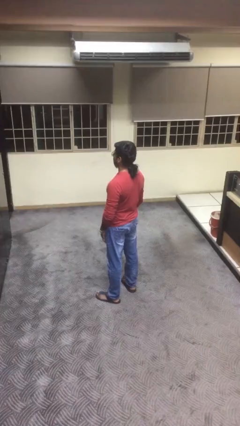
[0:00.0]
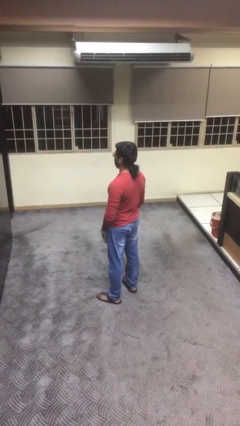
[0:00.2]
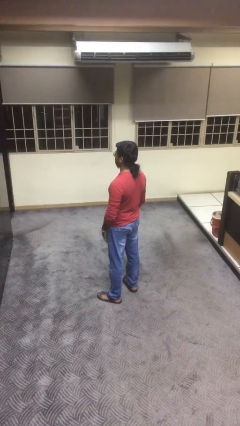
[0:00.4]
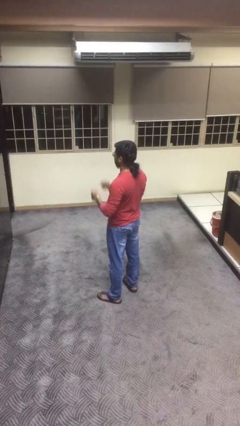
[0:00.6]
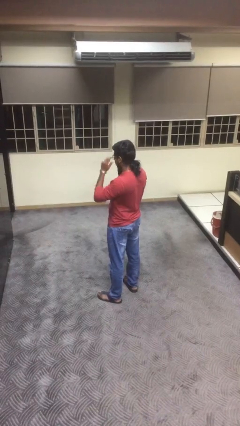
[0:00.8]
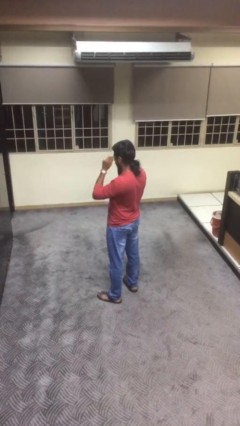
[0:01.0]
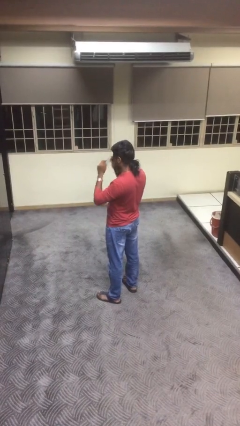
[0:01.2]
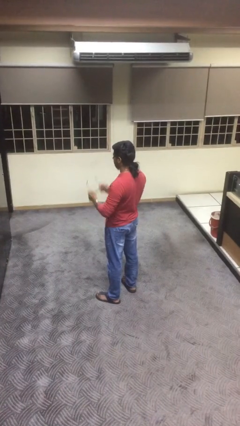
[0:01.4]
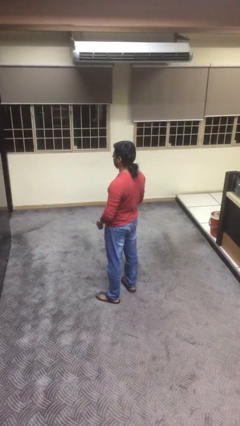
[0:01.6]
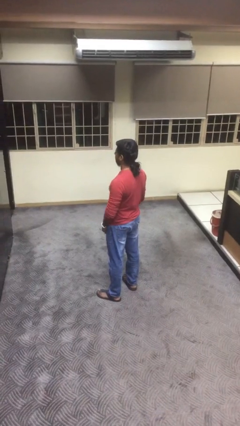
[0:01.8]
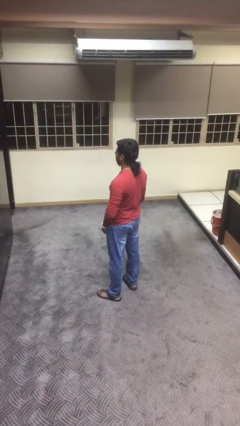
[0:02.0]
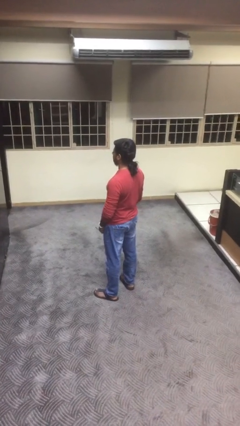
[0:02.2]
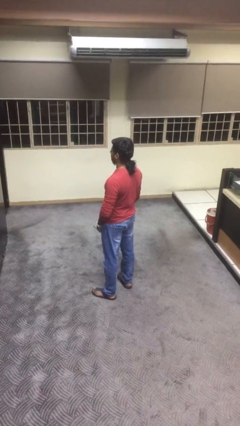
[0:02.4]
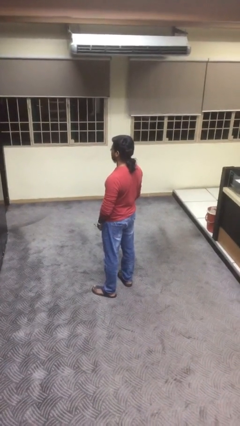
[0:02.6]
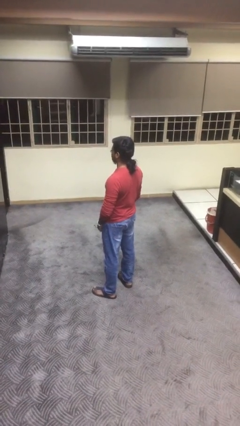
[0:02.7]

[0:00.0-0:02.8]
person takes off glasses

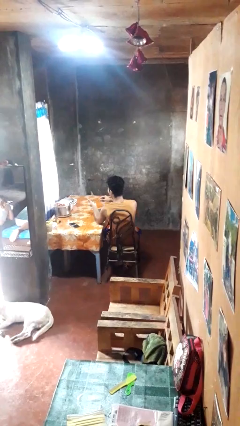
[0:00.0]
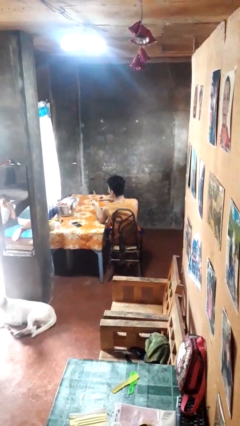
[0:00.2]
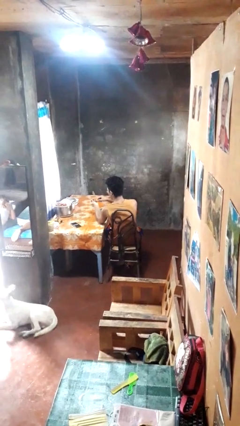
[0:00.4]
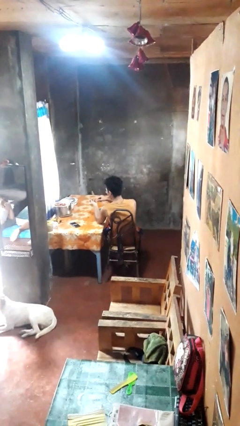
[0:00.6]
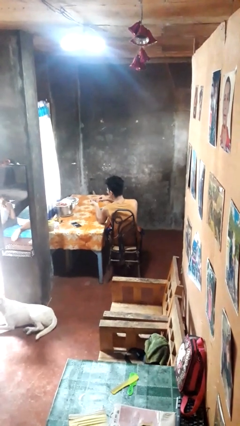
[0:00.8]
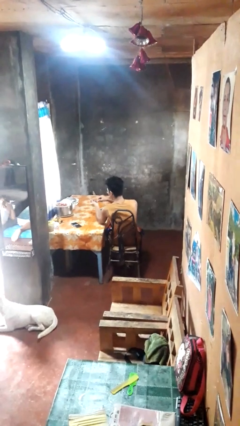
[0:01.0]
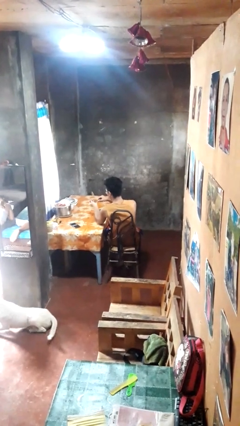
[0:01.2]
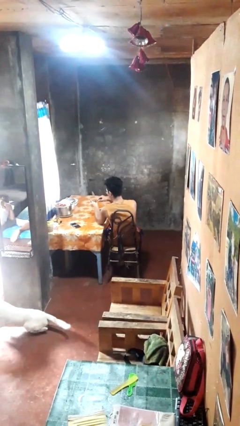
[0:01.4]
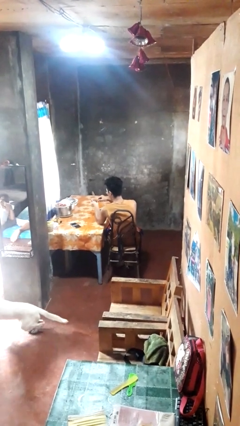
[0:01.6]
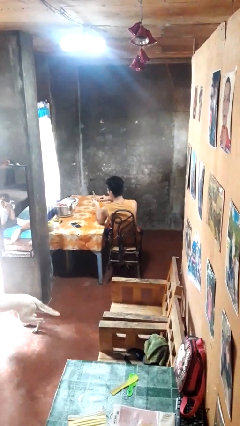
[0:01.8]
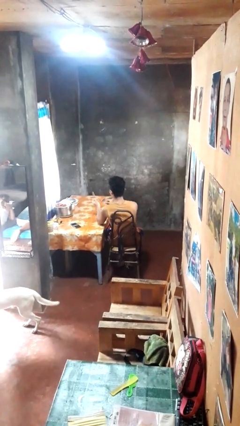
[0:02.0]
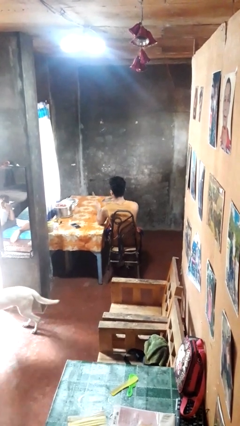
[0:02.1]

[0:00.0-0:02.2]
person files fingernails

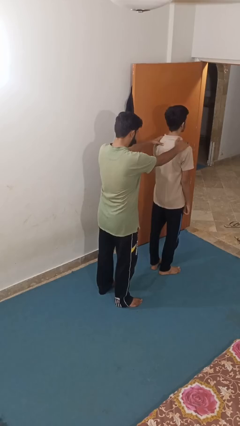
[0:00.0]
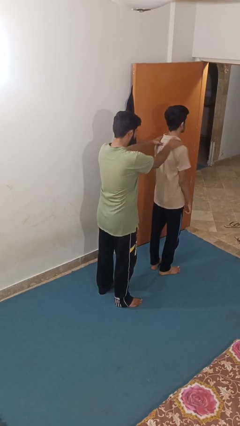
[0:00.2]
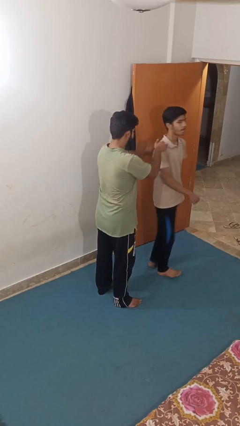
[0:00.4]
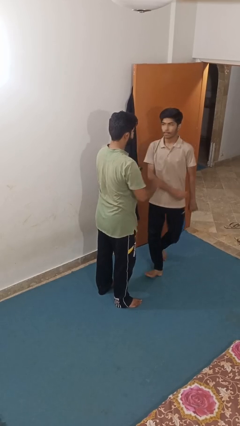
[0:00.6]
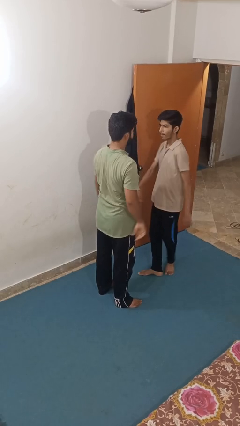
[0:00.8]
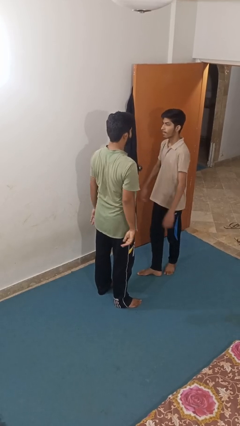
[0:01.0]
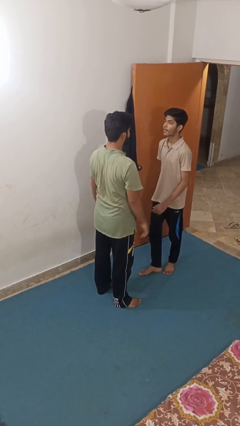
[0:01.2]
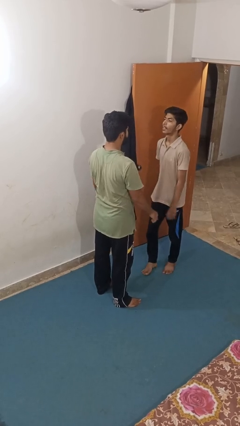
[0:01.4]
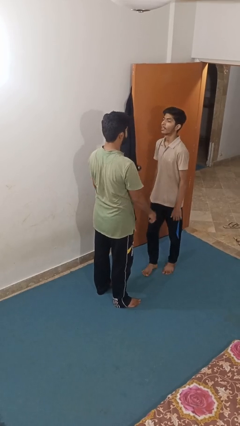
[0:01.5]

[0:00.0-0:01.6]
person spins person around

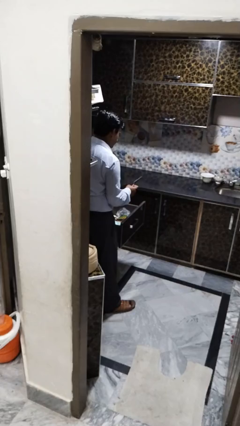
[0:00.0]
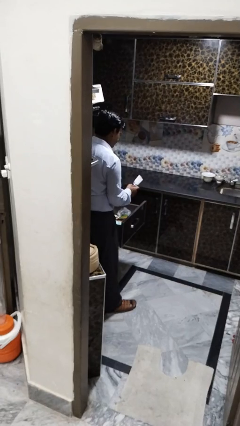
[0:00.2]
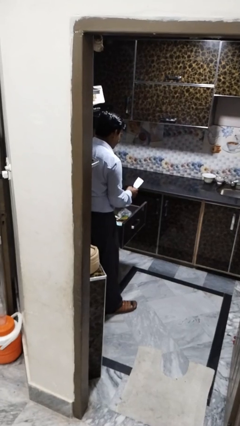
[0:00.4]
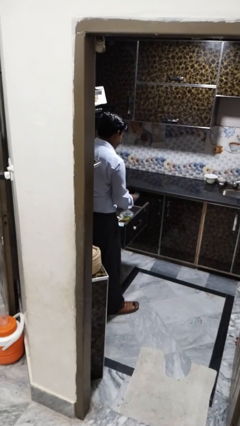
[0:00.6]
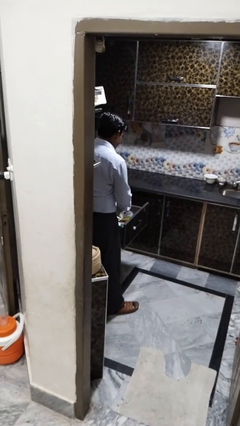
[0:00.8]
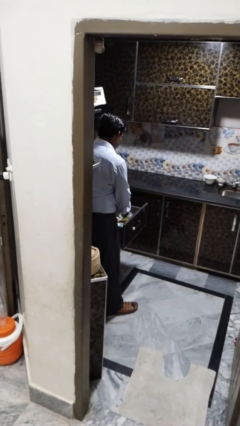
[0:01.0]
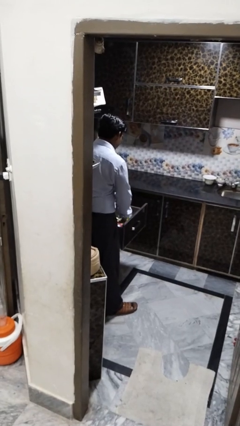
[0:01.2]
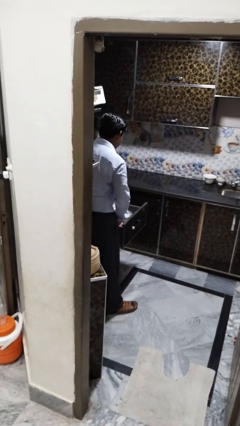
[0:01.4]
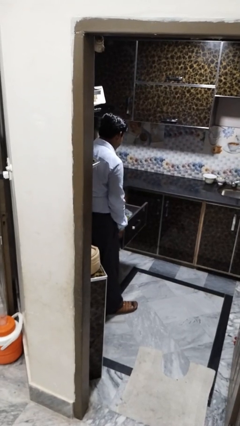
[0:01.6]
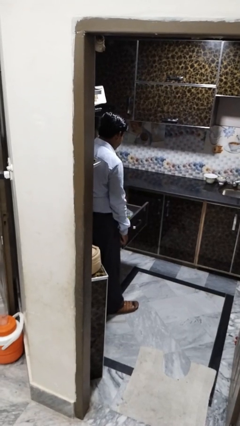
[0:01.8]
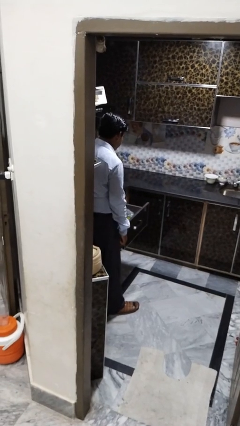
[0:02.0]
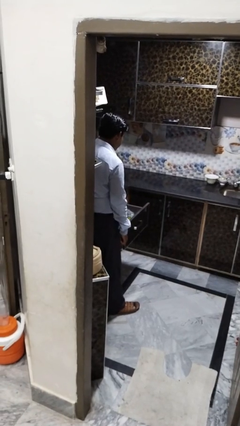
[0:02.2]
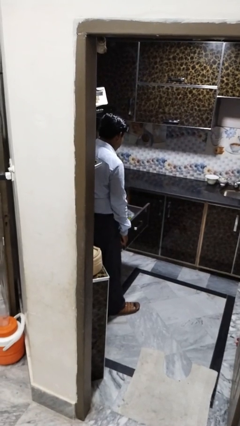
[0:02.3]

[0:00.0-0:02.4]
person puts object into kitchen drawer

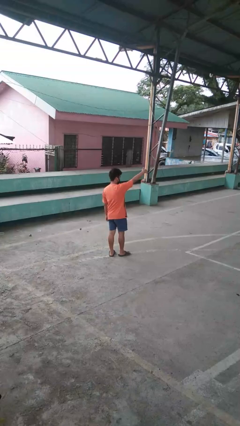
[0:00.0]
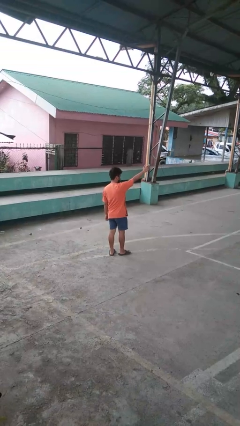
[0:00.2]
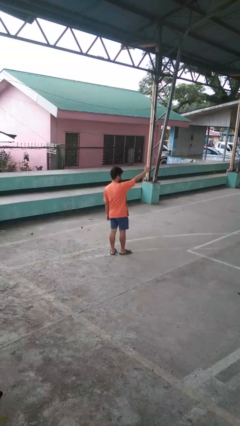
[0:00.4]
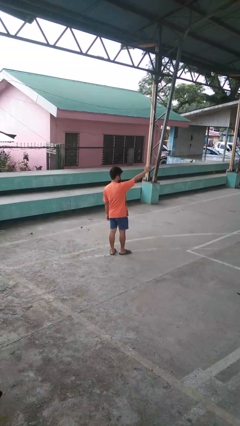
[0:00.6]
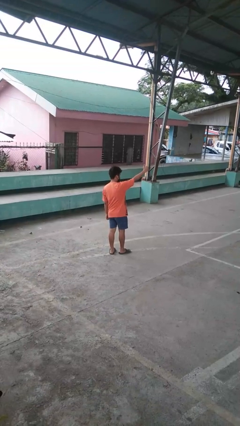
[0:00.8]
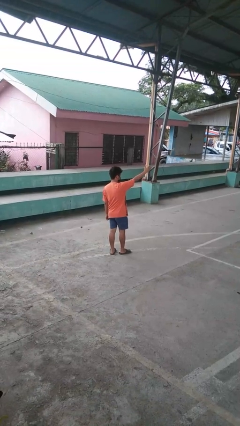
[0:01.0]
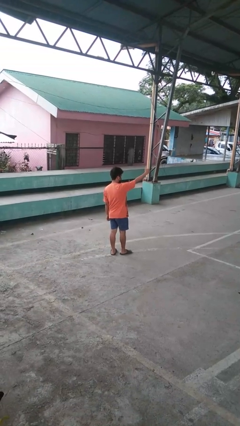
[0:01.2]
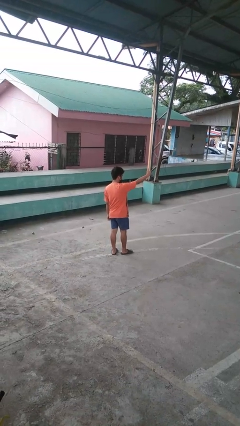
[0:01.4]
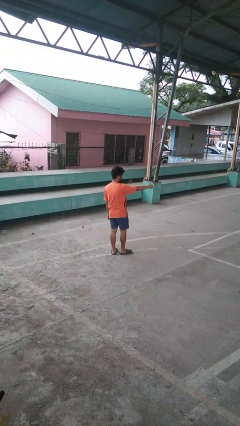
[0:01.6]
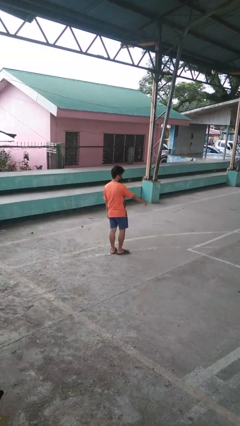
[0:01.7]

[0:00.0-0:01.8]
person gestures come here

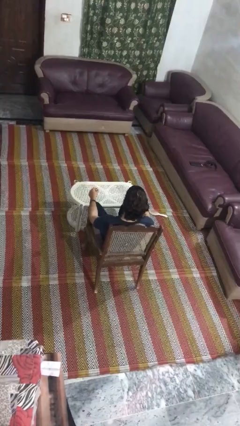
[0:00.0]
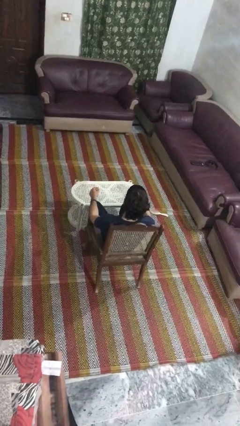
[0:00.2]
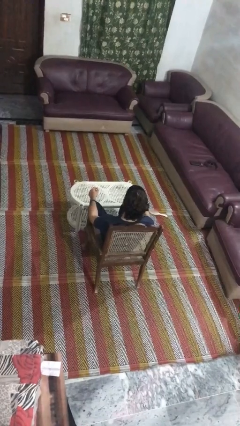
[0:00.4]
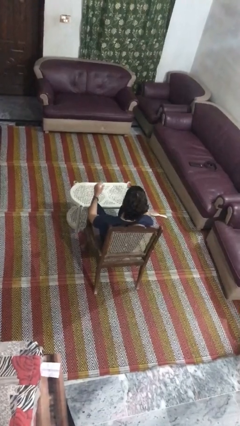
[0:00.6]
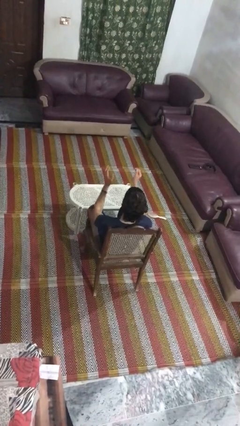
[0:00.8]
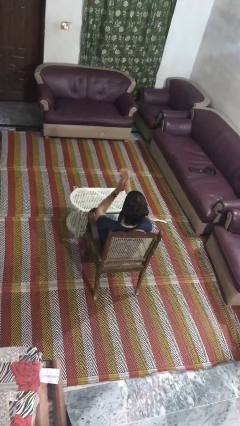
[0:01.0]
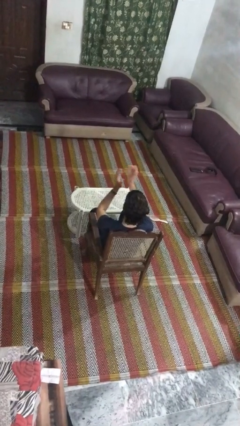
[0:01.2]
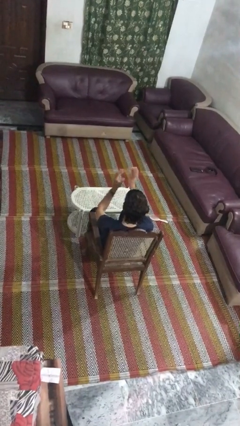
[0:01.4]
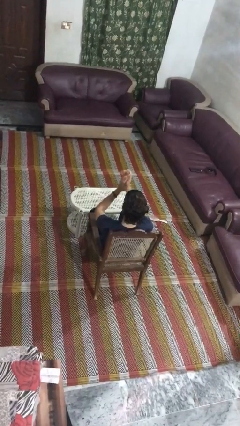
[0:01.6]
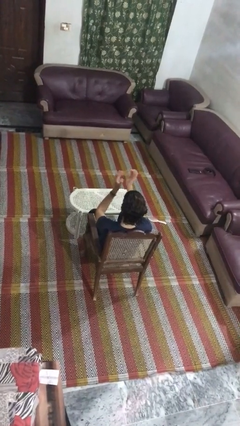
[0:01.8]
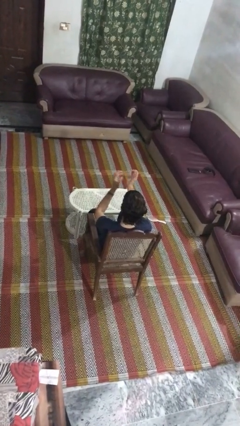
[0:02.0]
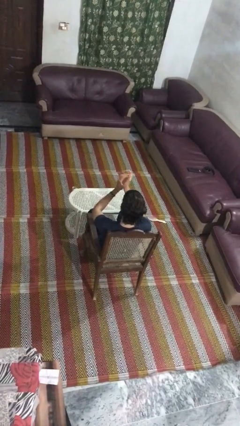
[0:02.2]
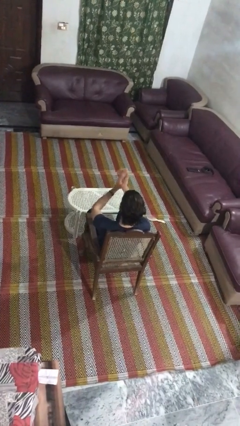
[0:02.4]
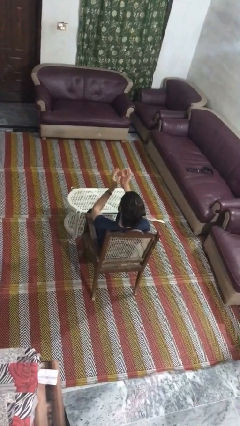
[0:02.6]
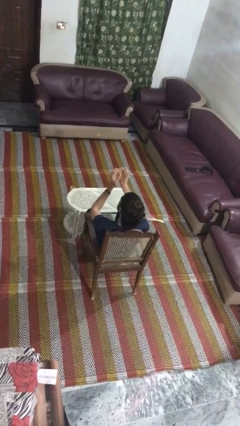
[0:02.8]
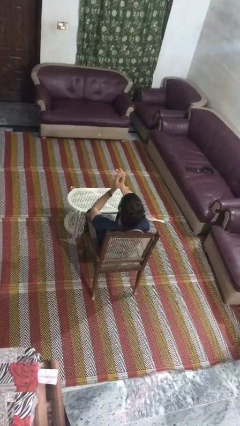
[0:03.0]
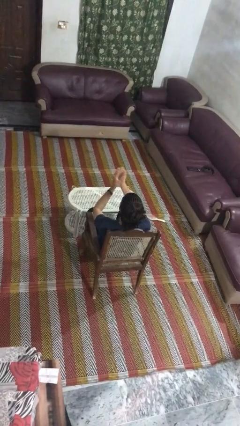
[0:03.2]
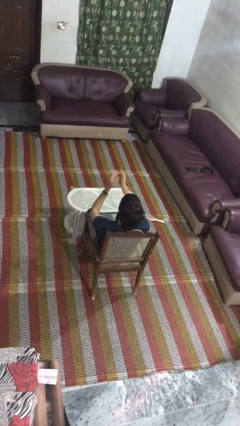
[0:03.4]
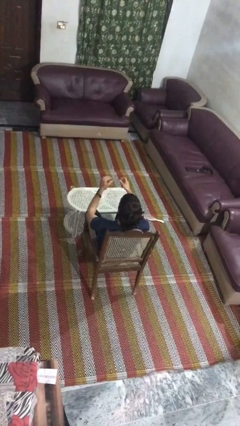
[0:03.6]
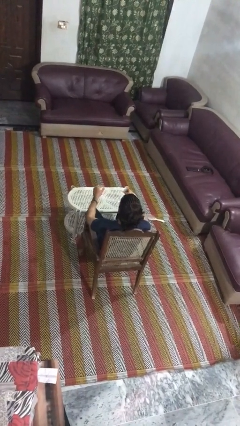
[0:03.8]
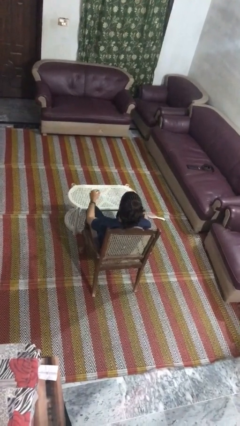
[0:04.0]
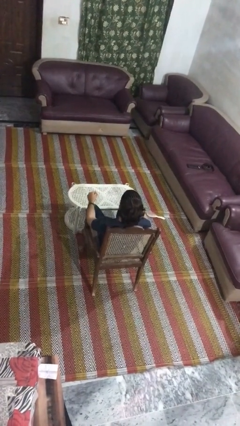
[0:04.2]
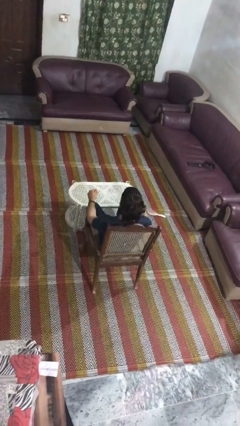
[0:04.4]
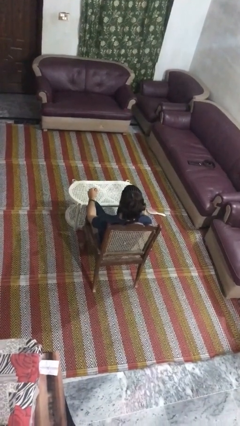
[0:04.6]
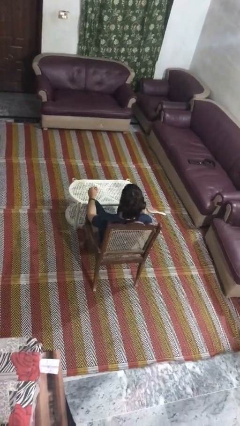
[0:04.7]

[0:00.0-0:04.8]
person claps hands

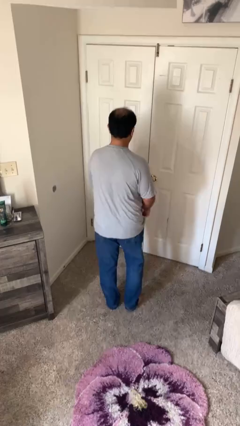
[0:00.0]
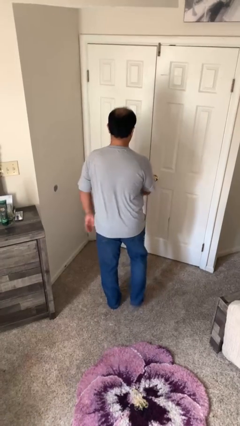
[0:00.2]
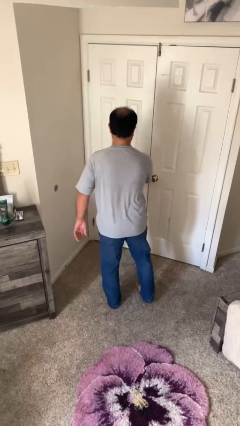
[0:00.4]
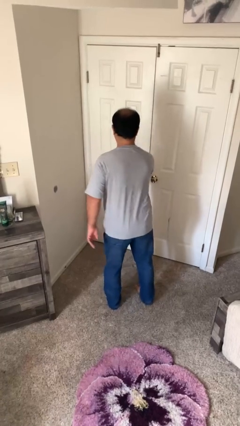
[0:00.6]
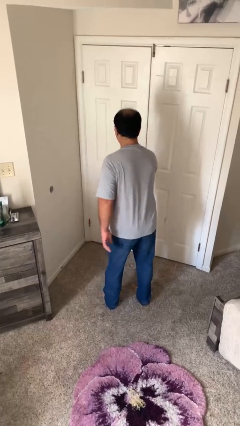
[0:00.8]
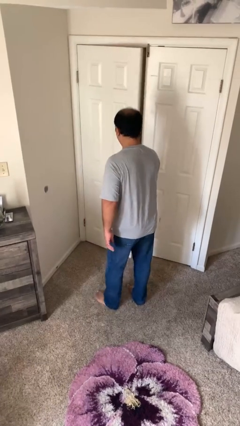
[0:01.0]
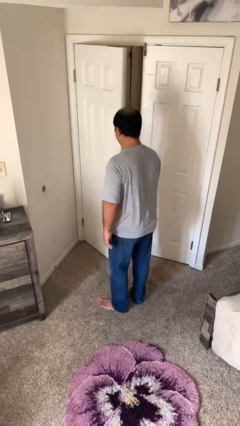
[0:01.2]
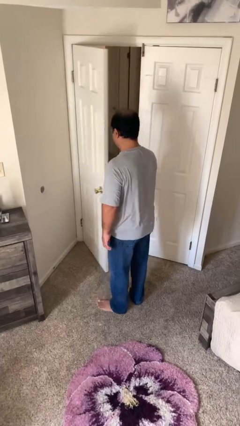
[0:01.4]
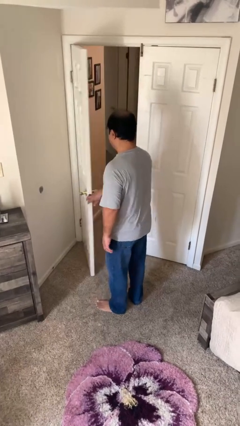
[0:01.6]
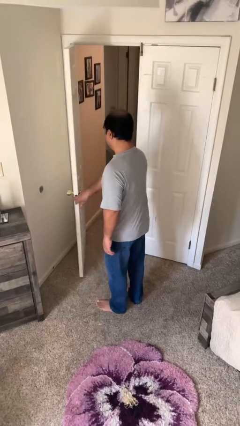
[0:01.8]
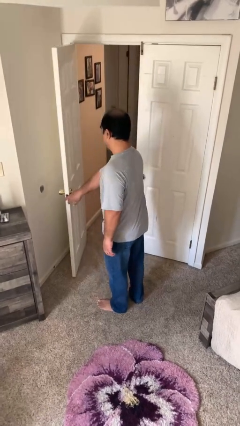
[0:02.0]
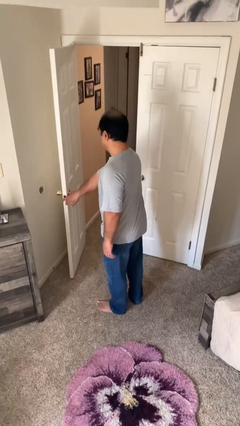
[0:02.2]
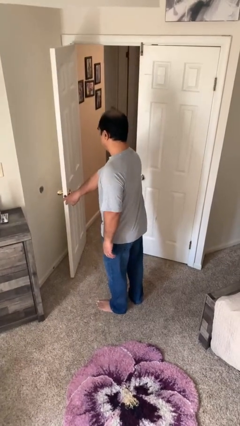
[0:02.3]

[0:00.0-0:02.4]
person opens facility door
